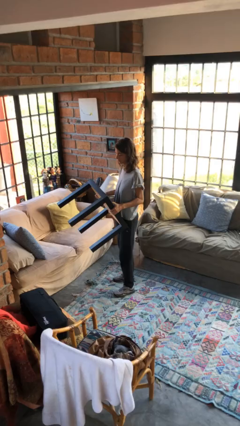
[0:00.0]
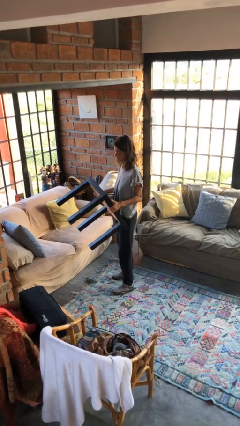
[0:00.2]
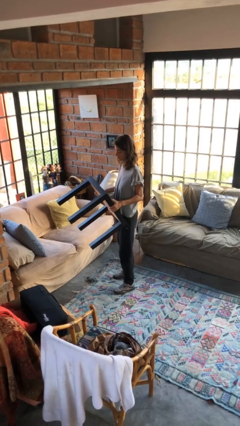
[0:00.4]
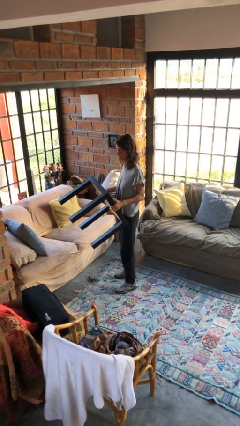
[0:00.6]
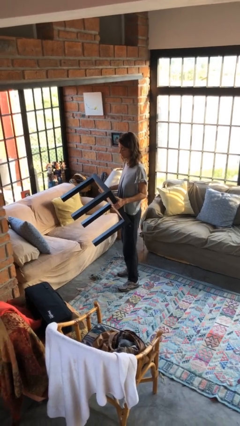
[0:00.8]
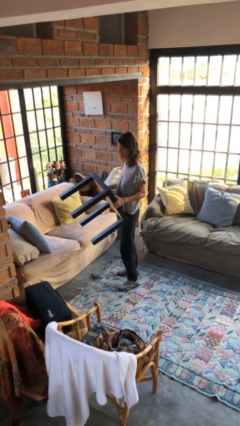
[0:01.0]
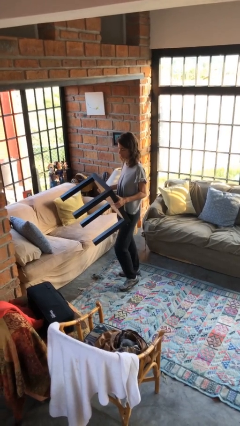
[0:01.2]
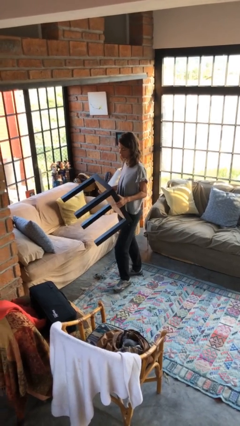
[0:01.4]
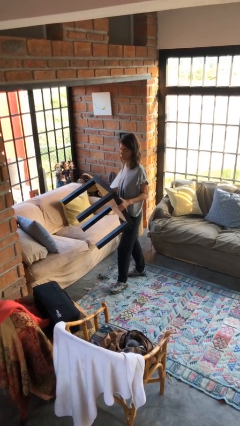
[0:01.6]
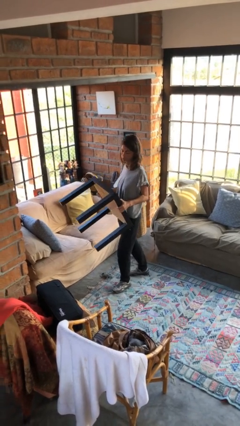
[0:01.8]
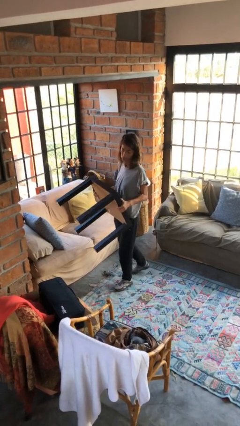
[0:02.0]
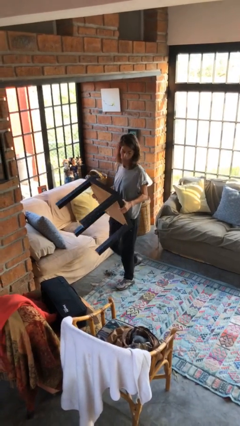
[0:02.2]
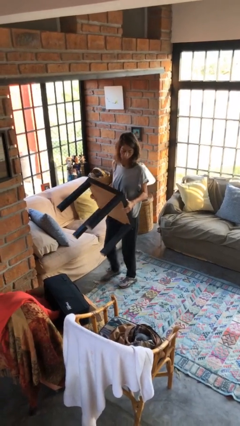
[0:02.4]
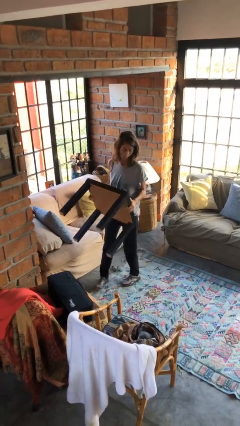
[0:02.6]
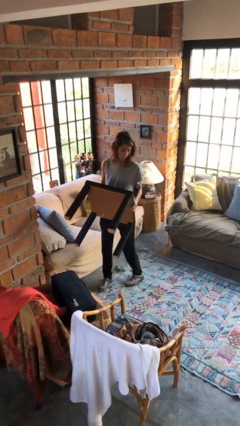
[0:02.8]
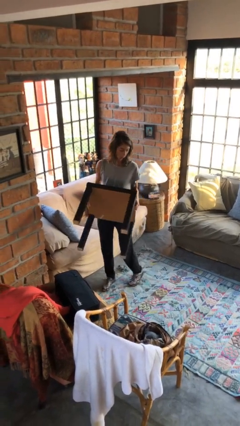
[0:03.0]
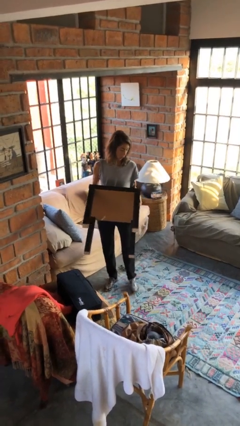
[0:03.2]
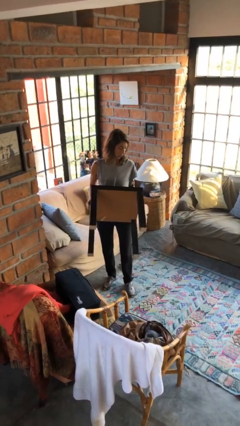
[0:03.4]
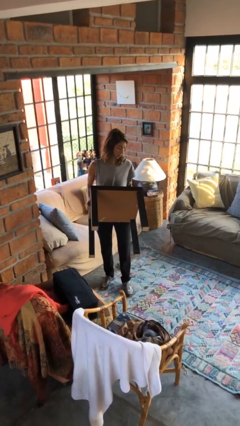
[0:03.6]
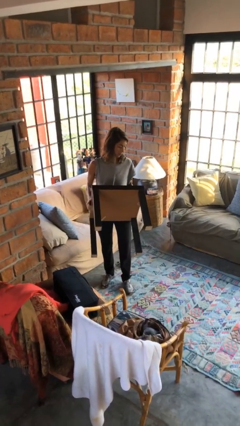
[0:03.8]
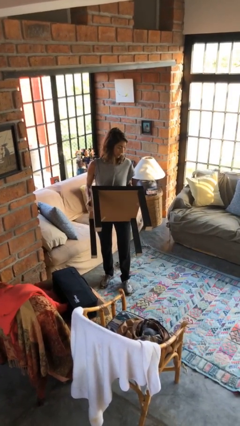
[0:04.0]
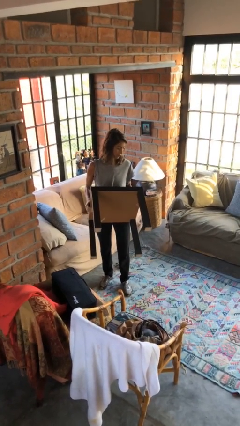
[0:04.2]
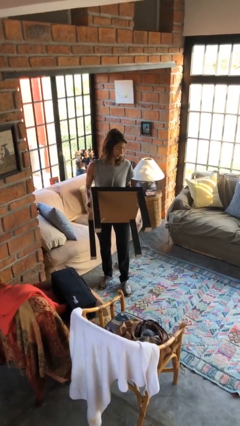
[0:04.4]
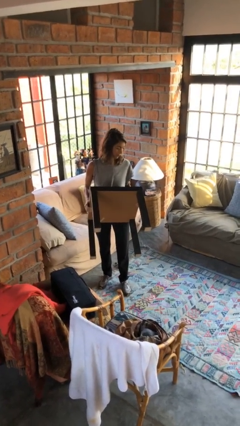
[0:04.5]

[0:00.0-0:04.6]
person carries furniture

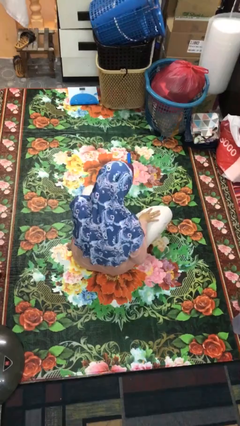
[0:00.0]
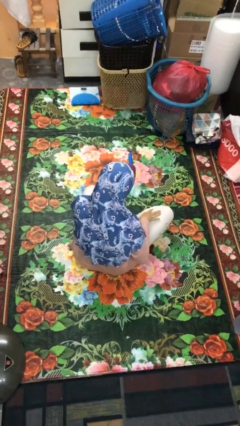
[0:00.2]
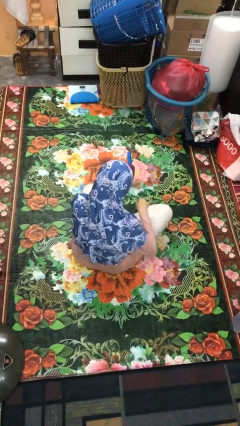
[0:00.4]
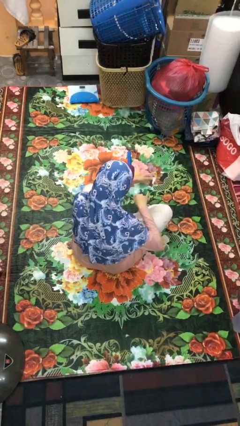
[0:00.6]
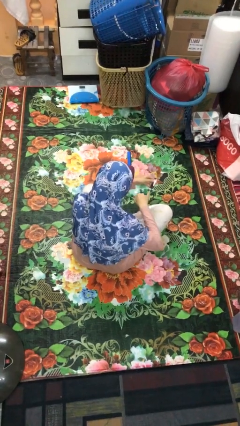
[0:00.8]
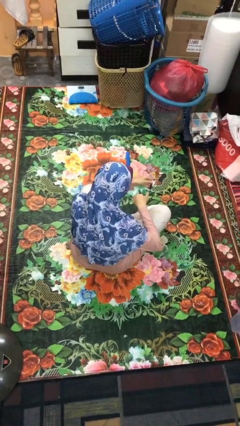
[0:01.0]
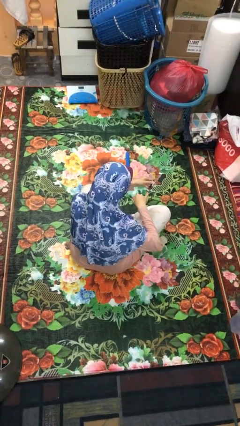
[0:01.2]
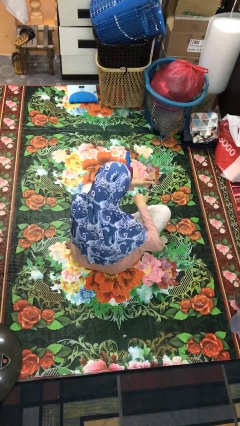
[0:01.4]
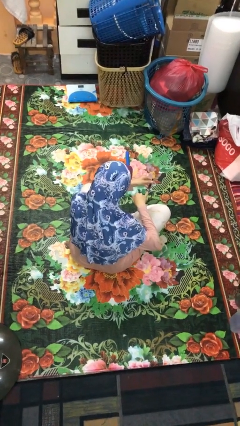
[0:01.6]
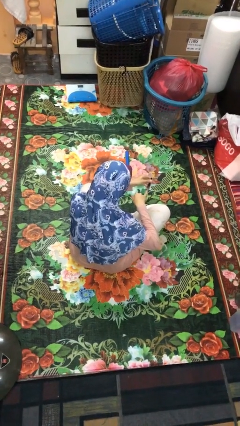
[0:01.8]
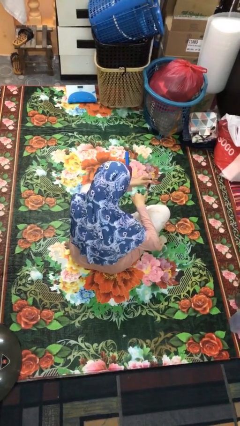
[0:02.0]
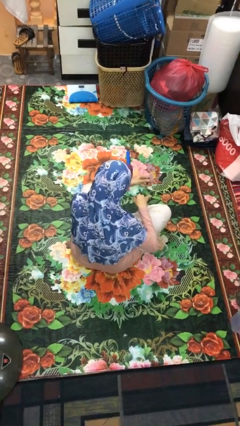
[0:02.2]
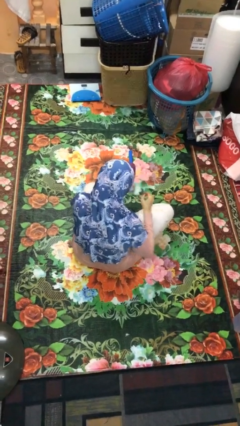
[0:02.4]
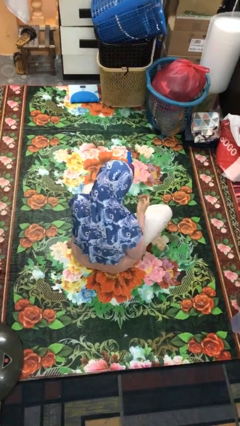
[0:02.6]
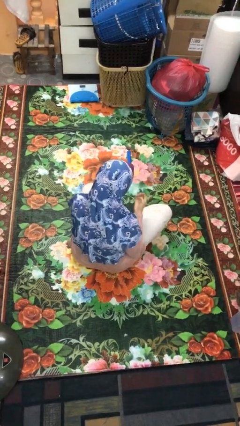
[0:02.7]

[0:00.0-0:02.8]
person clips fingernails

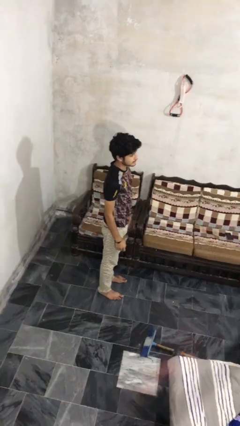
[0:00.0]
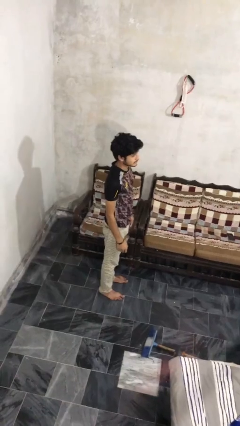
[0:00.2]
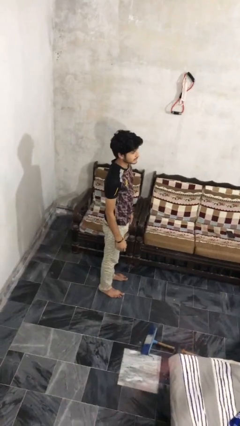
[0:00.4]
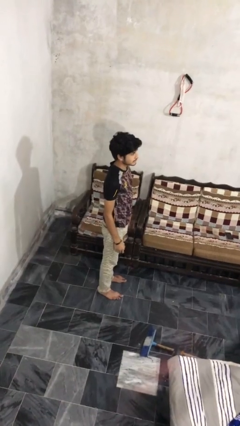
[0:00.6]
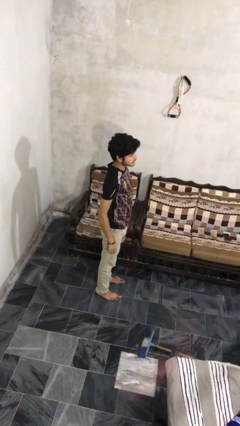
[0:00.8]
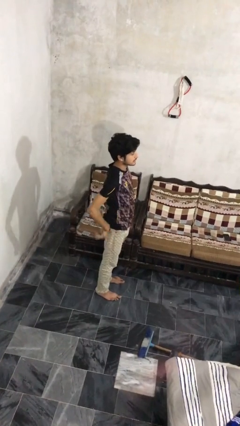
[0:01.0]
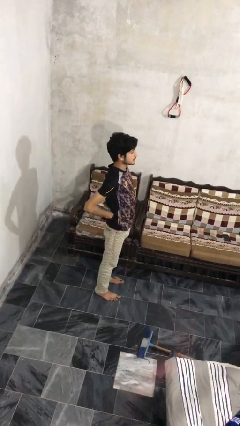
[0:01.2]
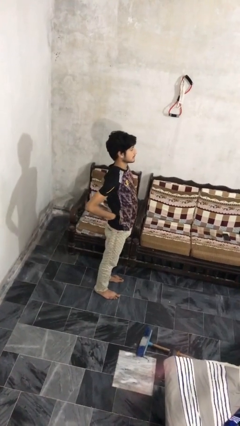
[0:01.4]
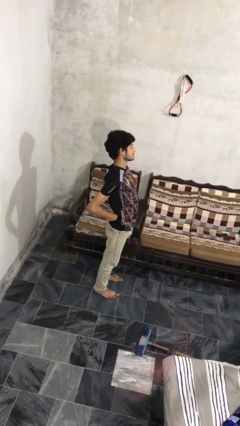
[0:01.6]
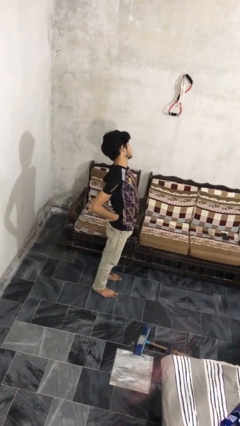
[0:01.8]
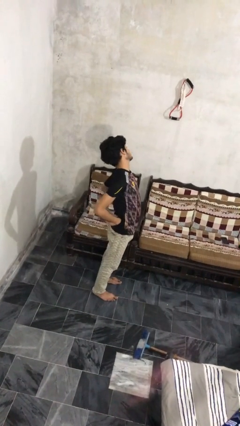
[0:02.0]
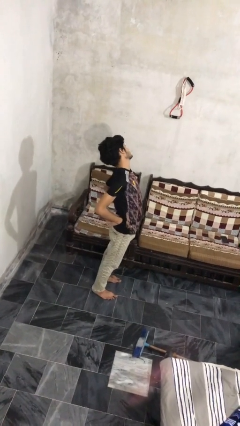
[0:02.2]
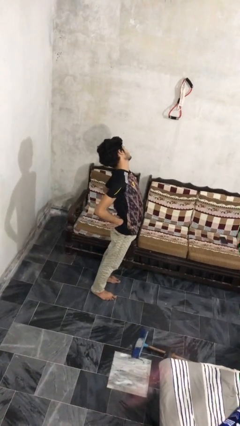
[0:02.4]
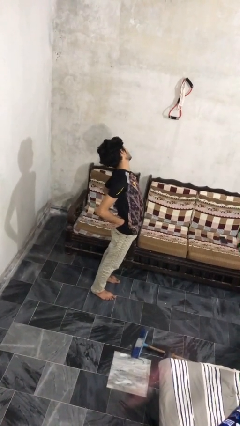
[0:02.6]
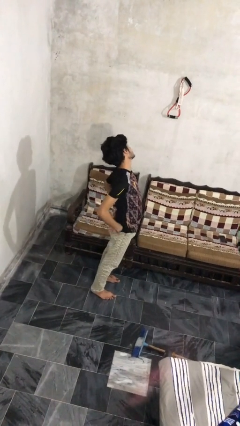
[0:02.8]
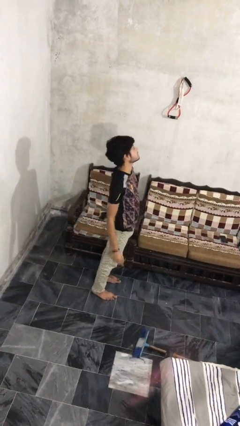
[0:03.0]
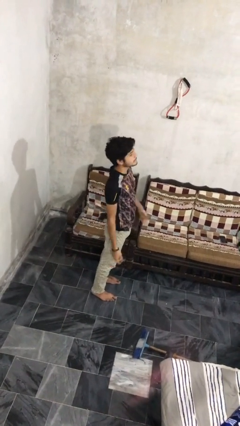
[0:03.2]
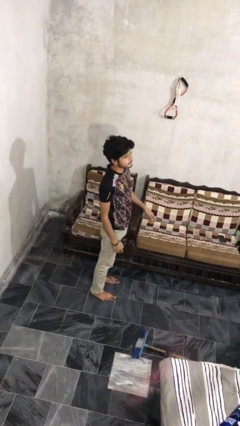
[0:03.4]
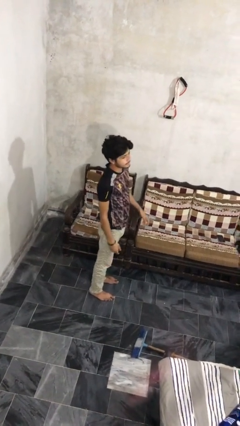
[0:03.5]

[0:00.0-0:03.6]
person stretches back

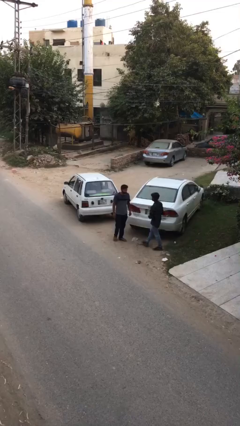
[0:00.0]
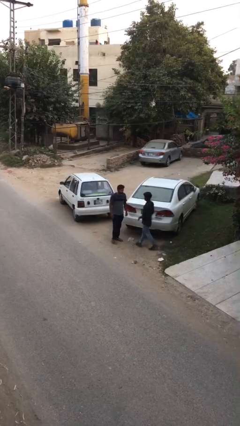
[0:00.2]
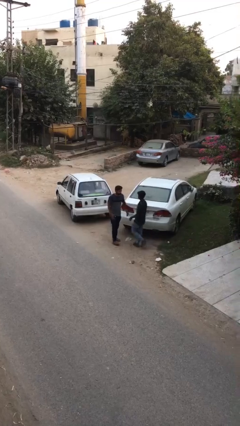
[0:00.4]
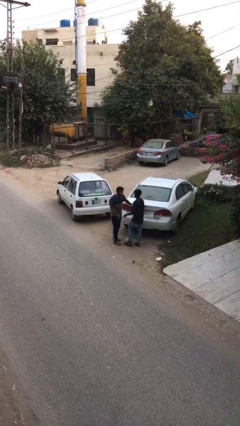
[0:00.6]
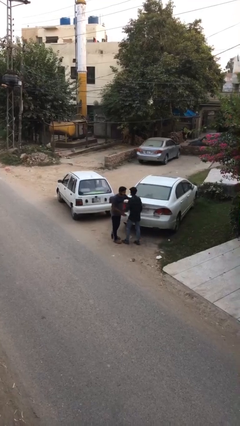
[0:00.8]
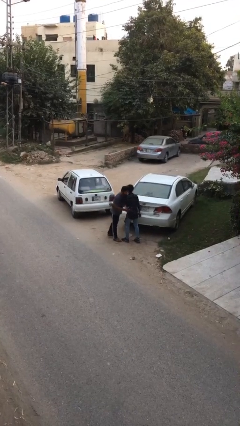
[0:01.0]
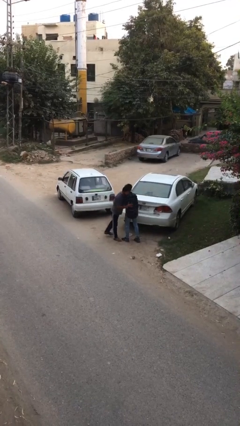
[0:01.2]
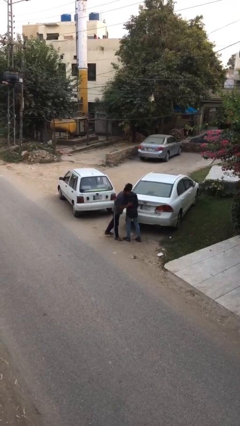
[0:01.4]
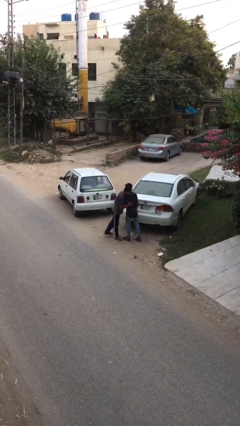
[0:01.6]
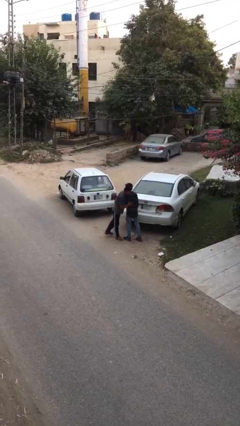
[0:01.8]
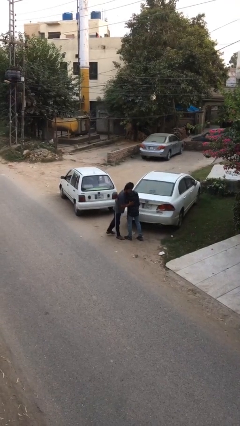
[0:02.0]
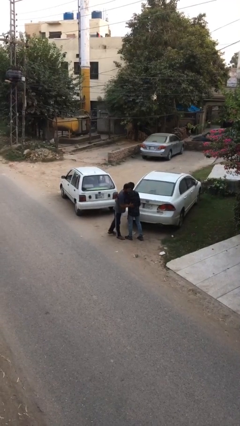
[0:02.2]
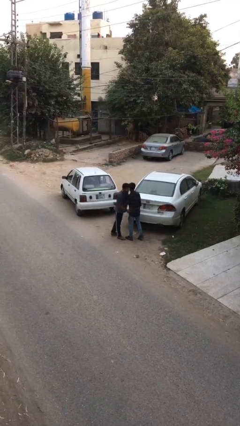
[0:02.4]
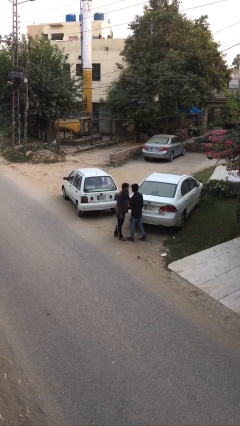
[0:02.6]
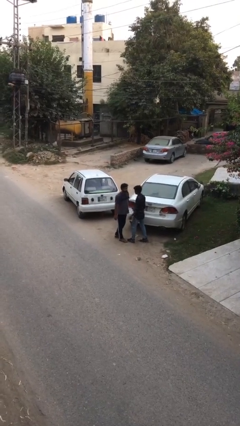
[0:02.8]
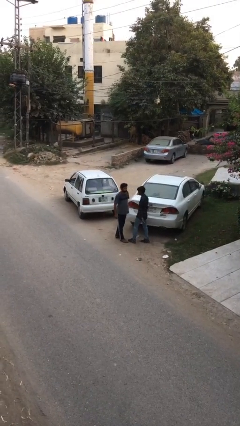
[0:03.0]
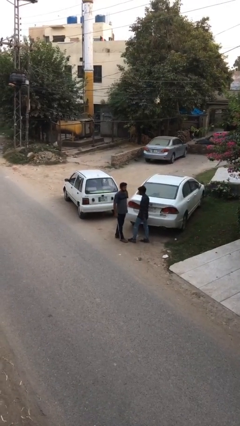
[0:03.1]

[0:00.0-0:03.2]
person embraces person

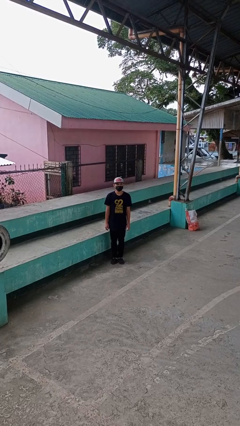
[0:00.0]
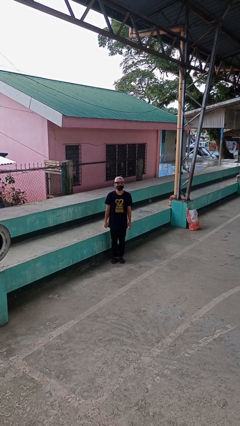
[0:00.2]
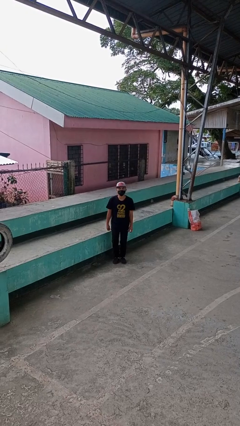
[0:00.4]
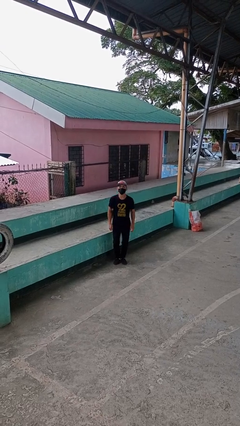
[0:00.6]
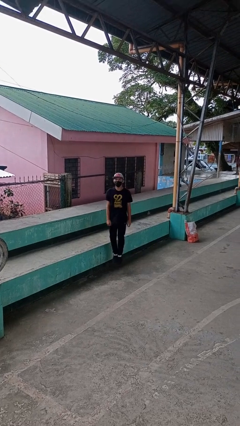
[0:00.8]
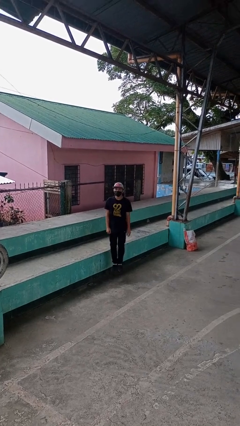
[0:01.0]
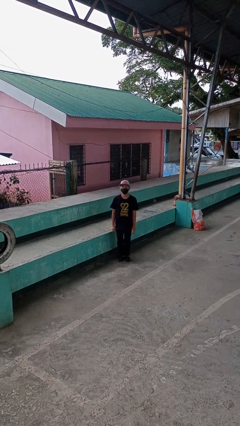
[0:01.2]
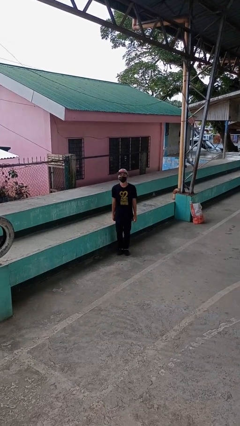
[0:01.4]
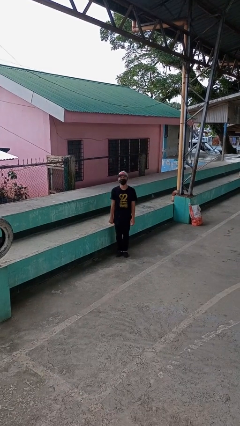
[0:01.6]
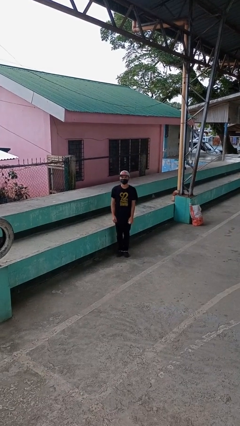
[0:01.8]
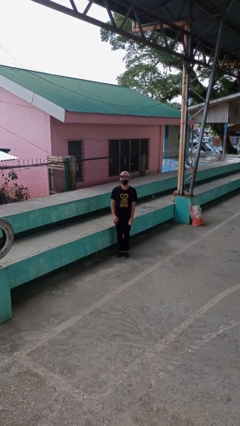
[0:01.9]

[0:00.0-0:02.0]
person jumps

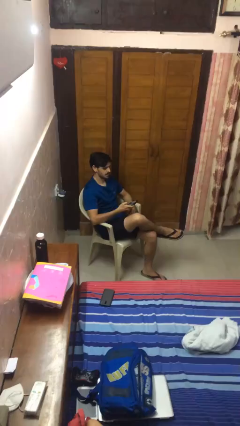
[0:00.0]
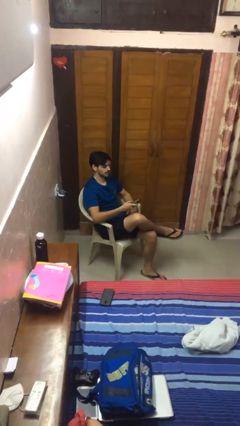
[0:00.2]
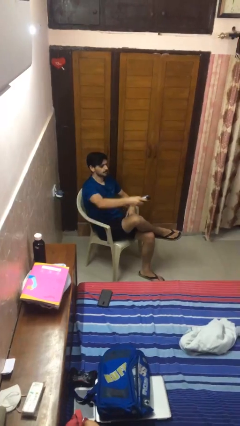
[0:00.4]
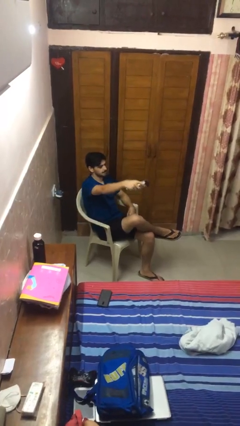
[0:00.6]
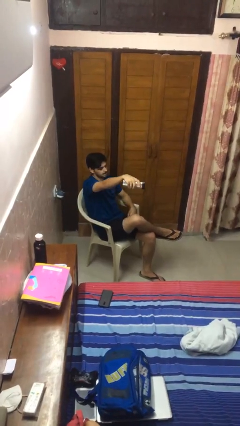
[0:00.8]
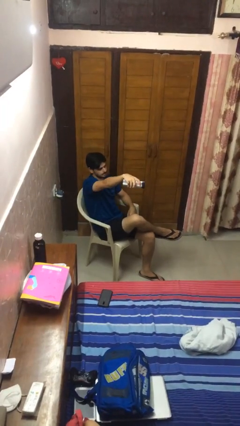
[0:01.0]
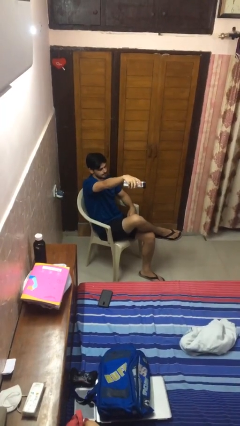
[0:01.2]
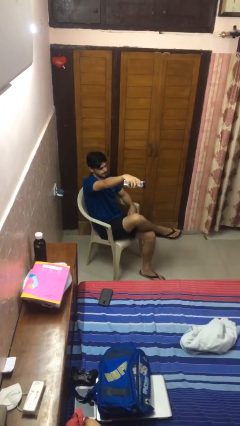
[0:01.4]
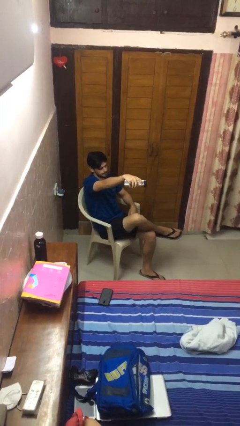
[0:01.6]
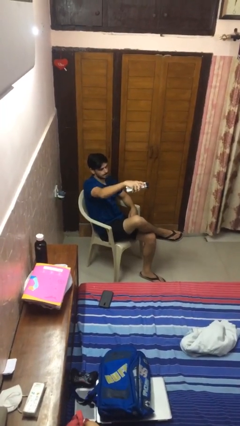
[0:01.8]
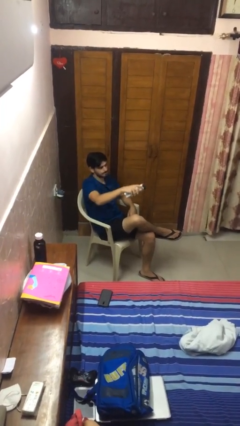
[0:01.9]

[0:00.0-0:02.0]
person uses television remote
